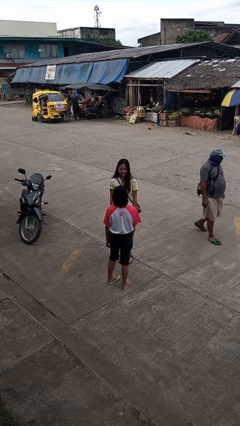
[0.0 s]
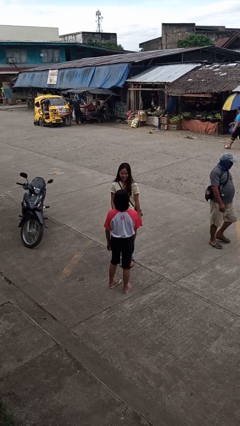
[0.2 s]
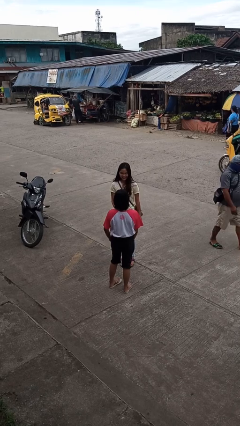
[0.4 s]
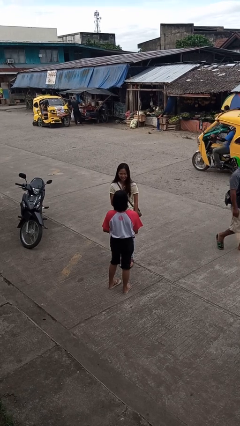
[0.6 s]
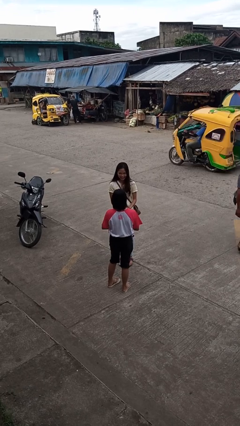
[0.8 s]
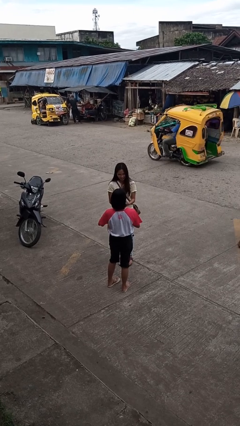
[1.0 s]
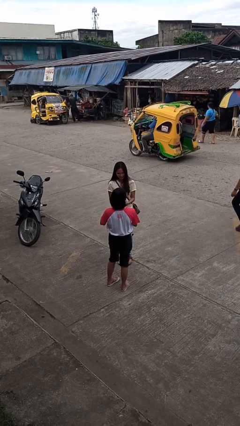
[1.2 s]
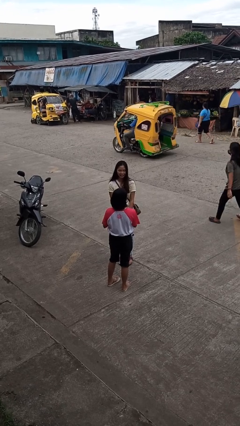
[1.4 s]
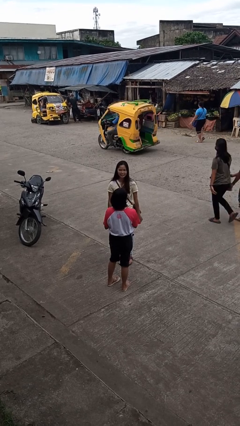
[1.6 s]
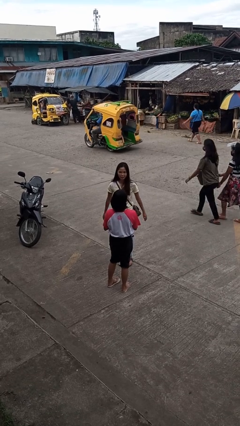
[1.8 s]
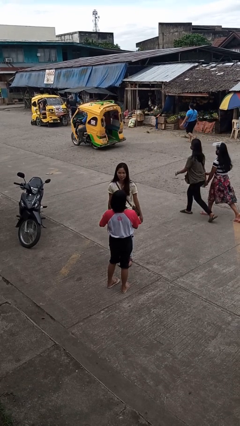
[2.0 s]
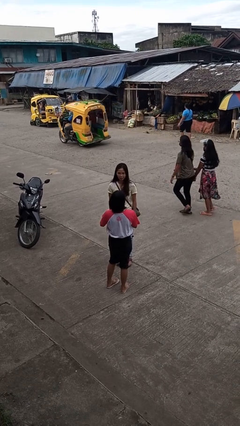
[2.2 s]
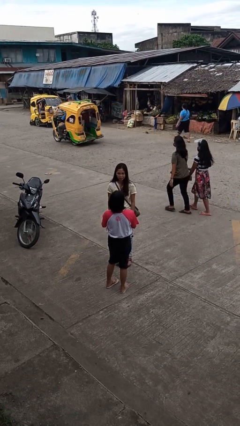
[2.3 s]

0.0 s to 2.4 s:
person laughs with person

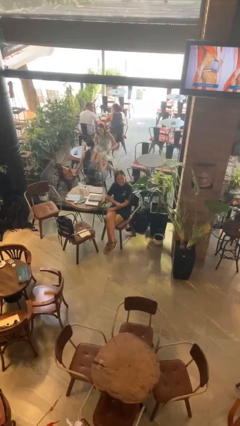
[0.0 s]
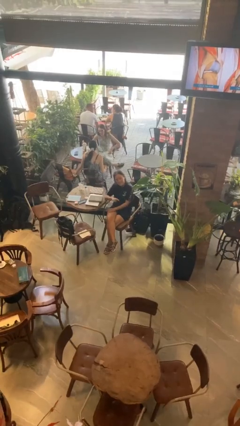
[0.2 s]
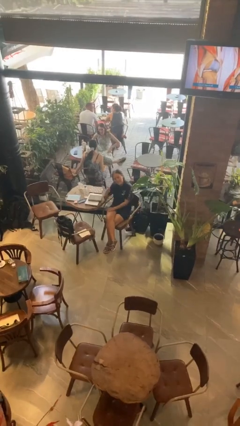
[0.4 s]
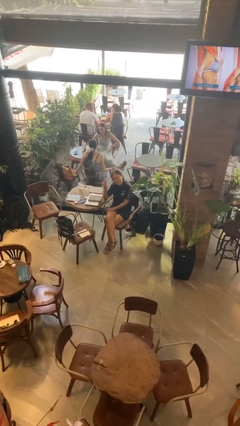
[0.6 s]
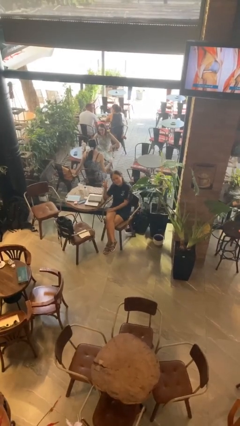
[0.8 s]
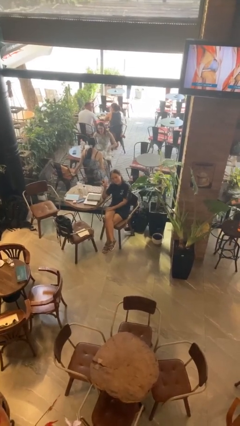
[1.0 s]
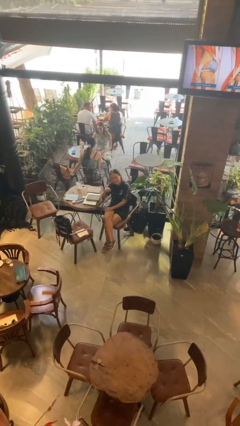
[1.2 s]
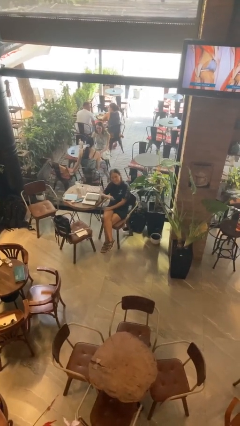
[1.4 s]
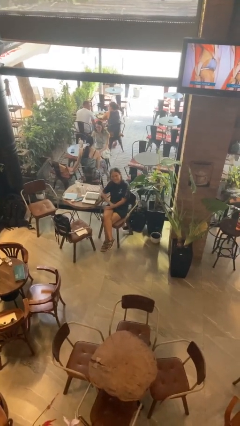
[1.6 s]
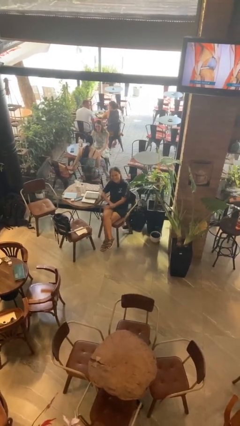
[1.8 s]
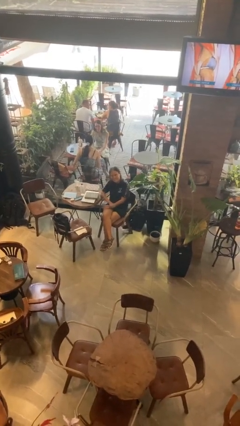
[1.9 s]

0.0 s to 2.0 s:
person gestures peace

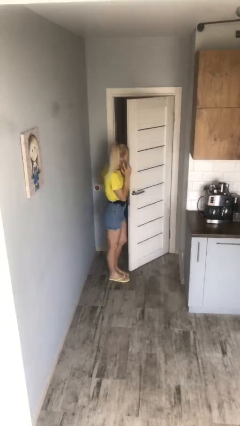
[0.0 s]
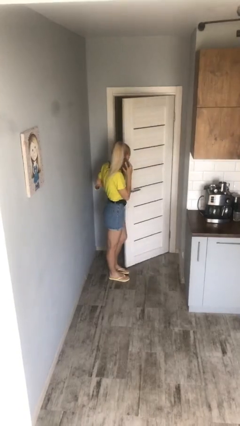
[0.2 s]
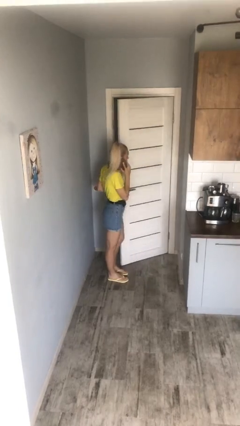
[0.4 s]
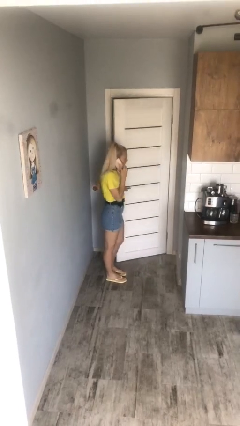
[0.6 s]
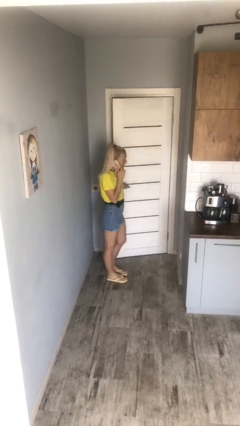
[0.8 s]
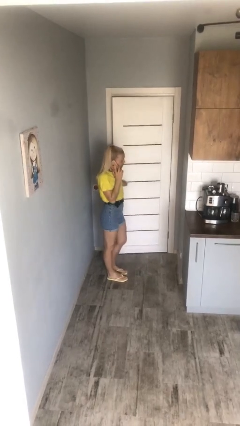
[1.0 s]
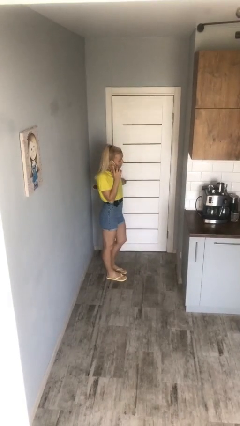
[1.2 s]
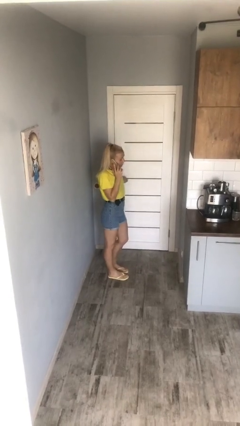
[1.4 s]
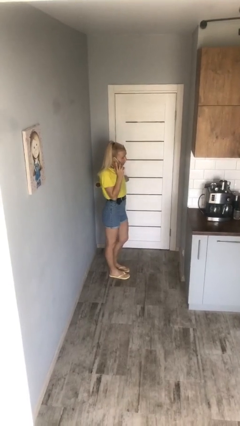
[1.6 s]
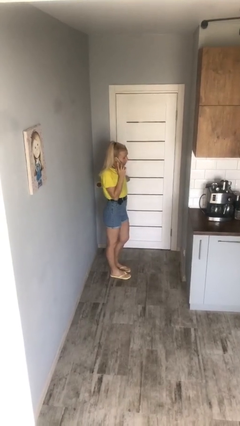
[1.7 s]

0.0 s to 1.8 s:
person closes facility door

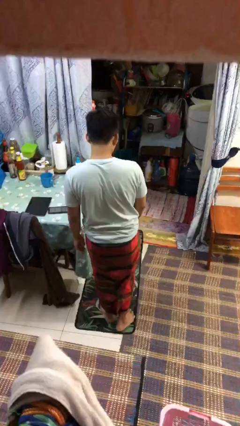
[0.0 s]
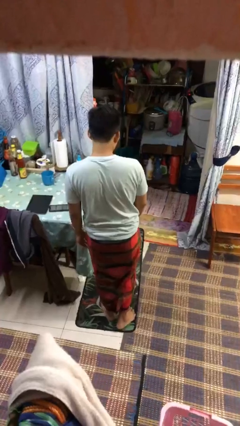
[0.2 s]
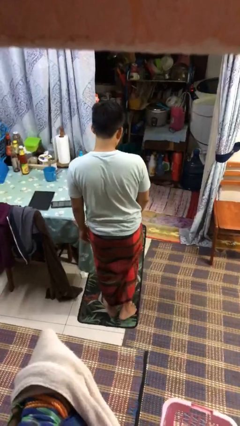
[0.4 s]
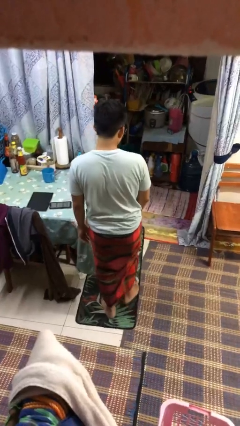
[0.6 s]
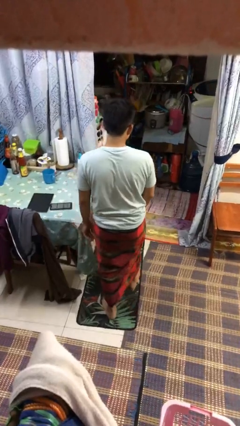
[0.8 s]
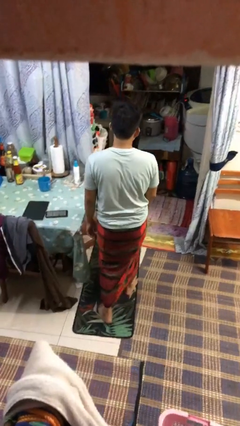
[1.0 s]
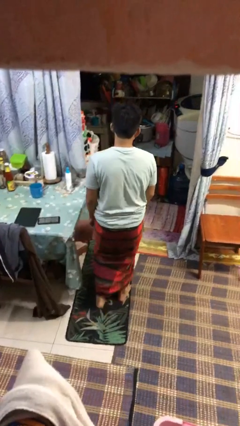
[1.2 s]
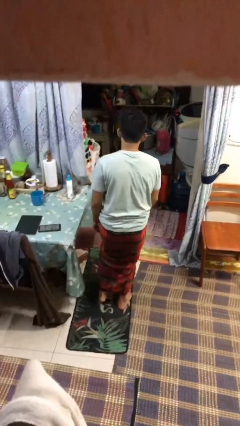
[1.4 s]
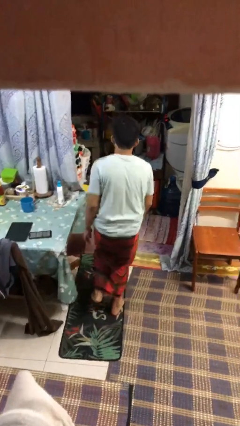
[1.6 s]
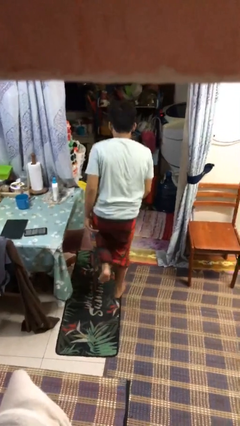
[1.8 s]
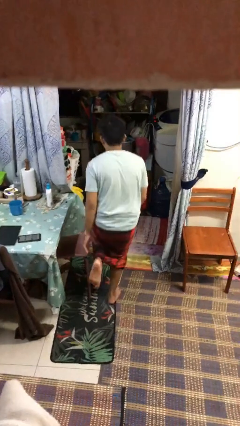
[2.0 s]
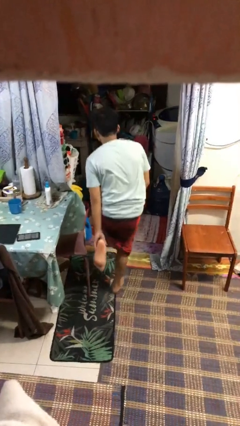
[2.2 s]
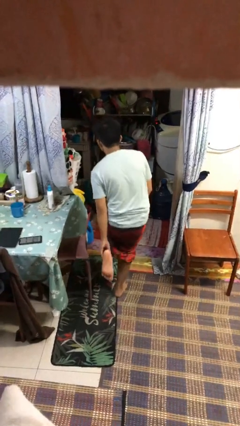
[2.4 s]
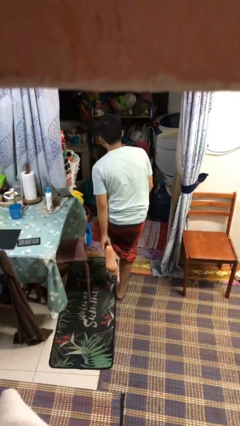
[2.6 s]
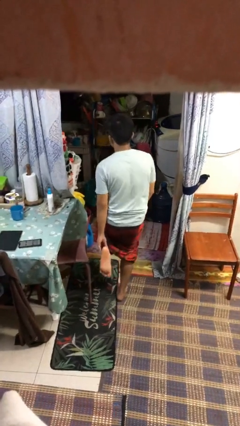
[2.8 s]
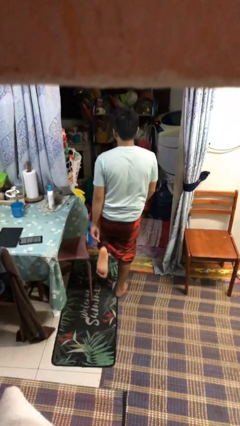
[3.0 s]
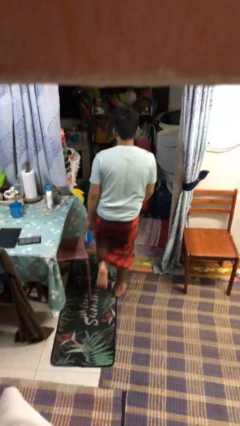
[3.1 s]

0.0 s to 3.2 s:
person stubs toe

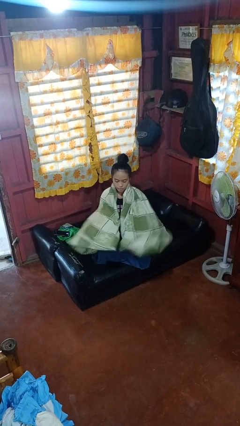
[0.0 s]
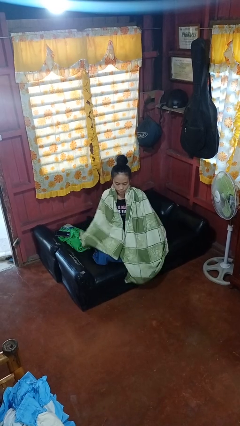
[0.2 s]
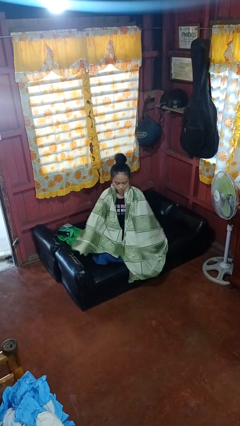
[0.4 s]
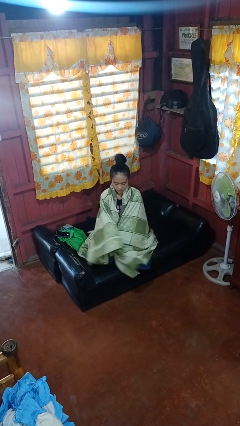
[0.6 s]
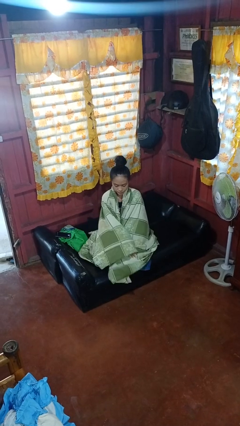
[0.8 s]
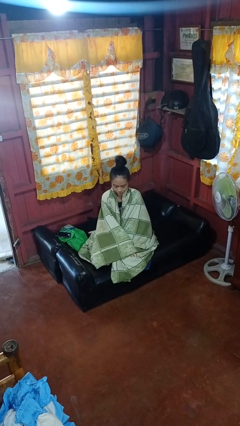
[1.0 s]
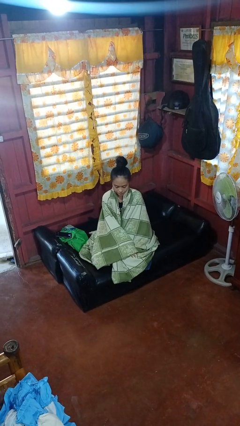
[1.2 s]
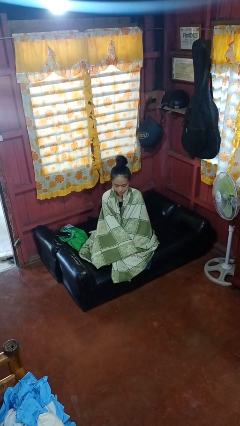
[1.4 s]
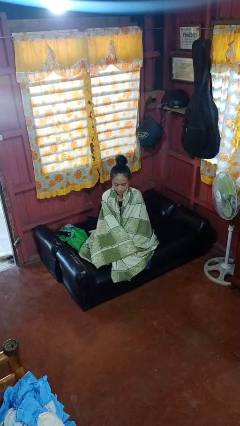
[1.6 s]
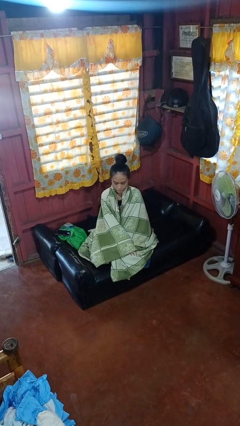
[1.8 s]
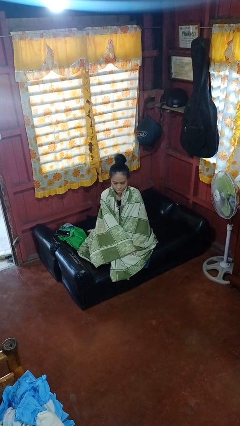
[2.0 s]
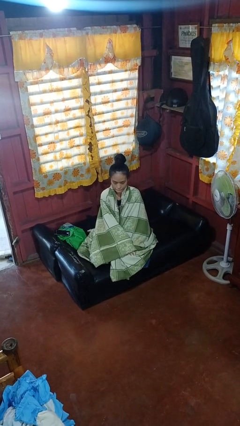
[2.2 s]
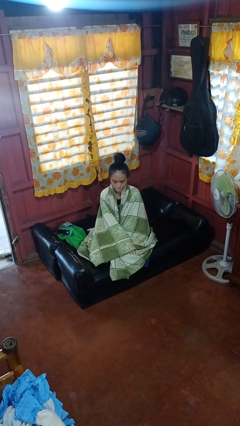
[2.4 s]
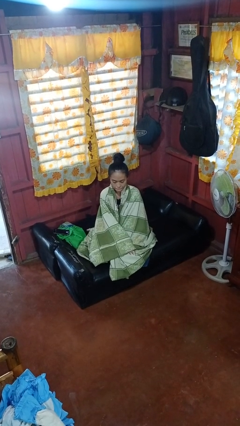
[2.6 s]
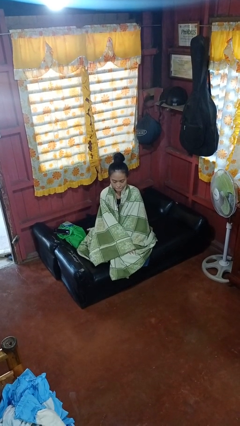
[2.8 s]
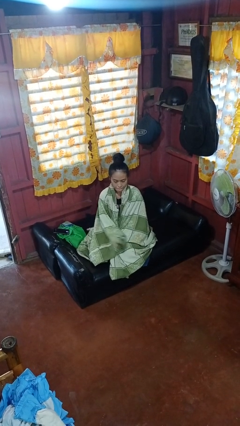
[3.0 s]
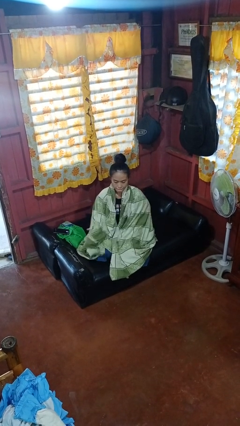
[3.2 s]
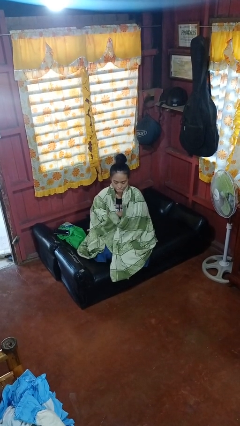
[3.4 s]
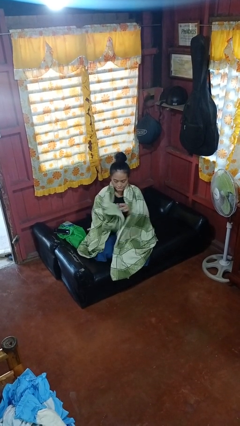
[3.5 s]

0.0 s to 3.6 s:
person covers with blanket

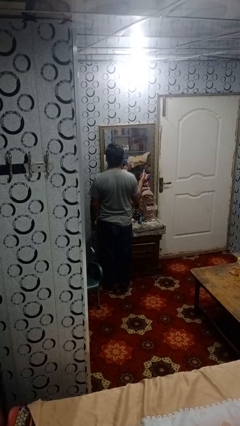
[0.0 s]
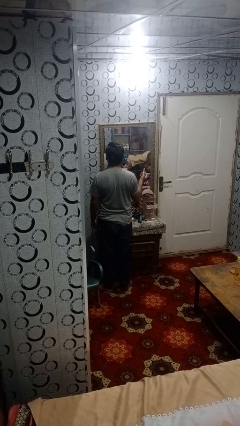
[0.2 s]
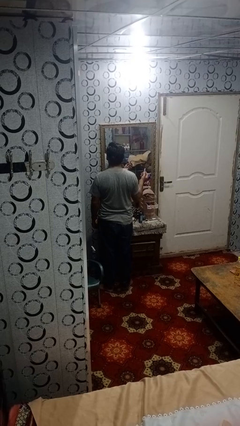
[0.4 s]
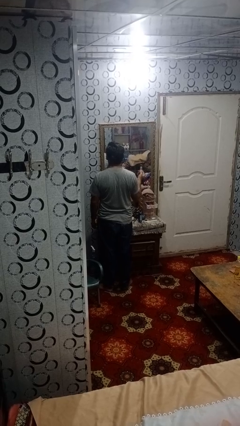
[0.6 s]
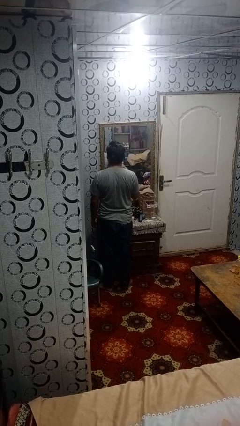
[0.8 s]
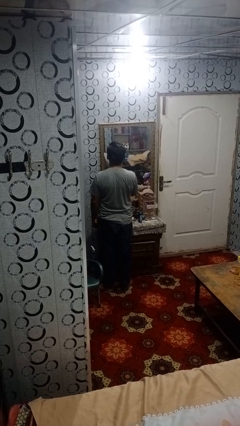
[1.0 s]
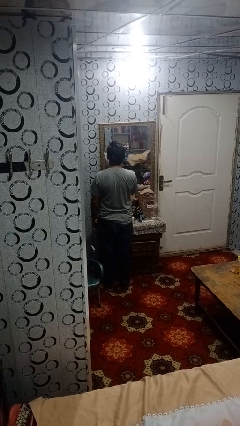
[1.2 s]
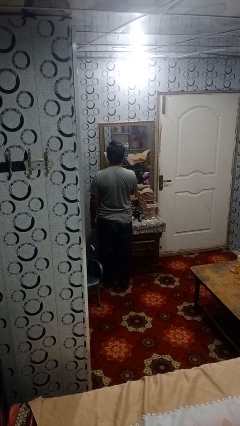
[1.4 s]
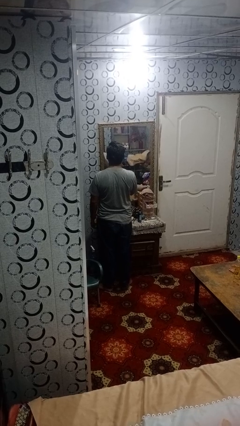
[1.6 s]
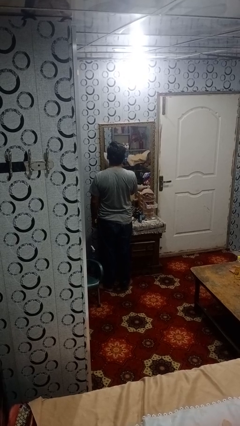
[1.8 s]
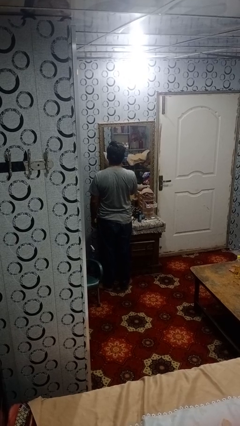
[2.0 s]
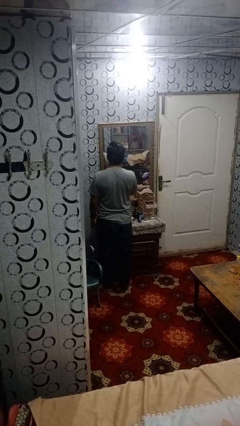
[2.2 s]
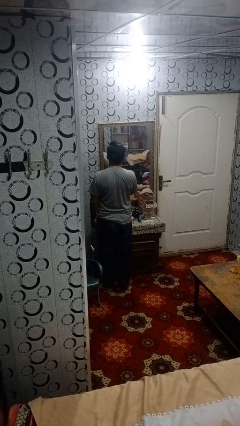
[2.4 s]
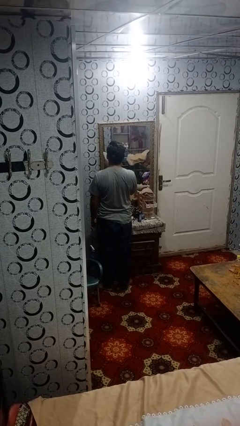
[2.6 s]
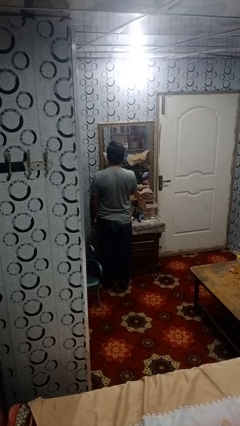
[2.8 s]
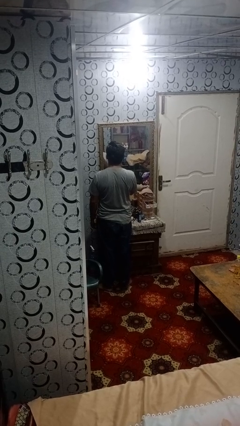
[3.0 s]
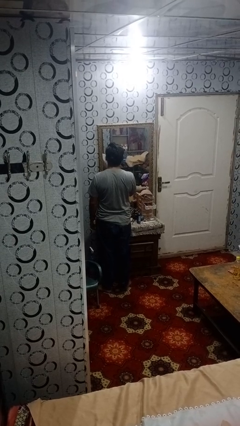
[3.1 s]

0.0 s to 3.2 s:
person applies lip makeup

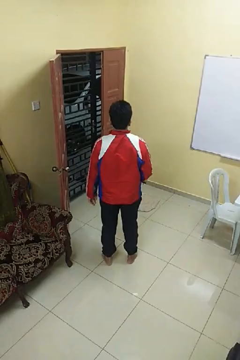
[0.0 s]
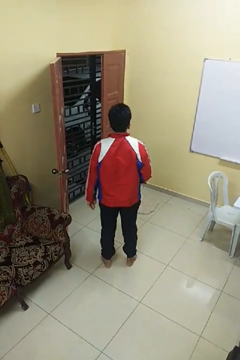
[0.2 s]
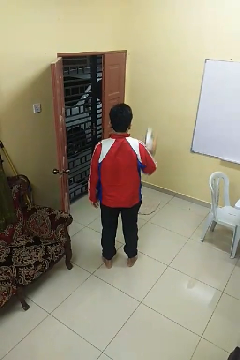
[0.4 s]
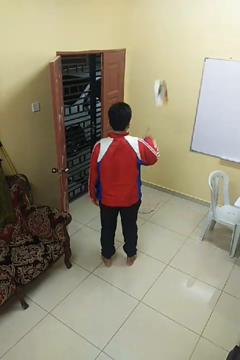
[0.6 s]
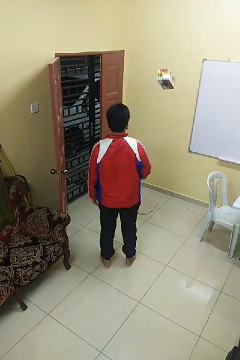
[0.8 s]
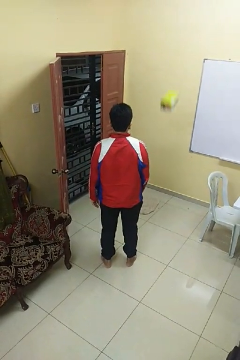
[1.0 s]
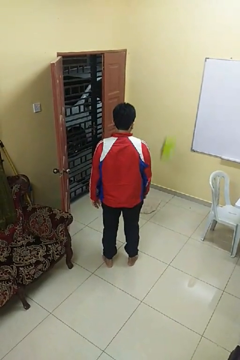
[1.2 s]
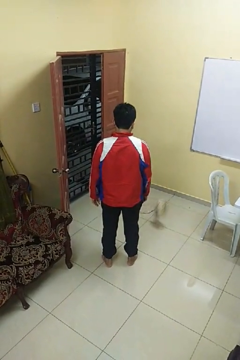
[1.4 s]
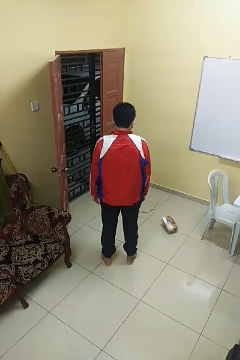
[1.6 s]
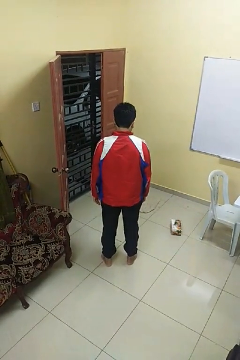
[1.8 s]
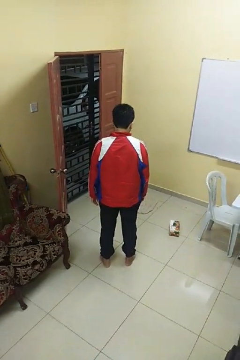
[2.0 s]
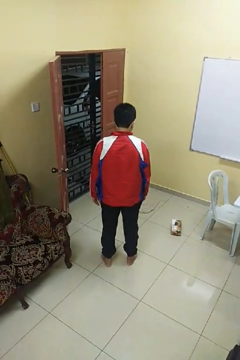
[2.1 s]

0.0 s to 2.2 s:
person throws object into air
